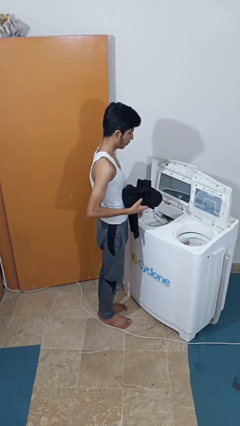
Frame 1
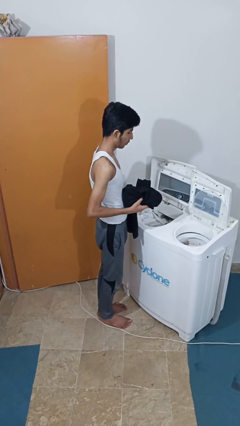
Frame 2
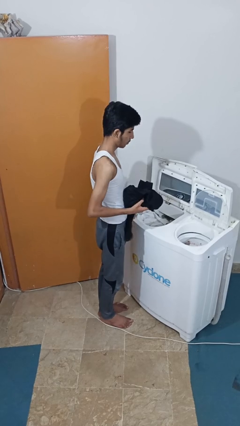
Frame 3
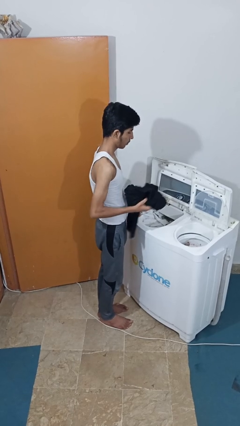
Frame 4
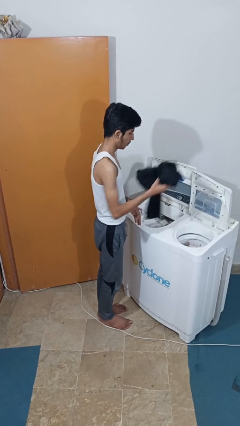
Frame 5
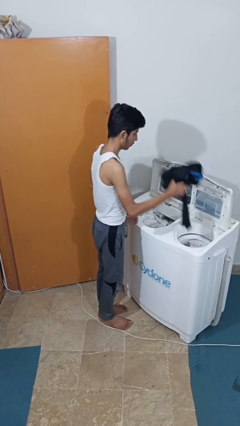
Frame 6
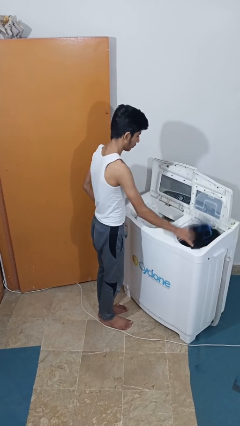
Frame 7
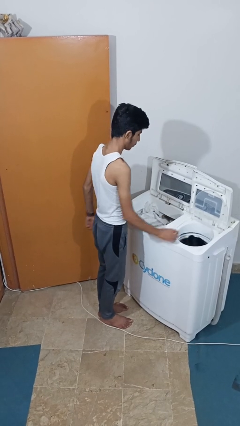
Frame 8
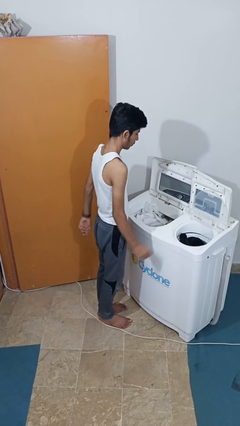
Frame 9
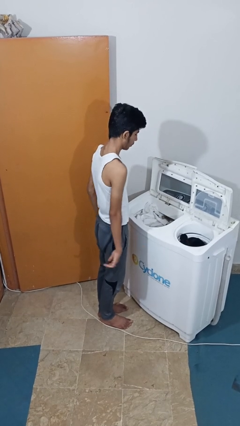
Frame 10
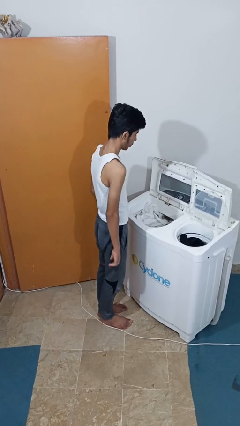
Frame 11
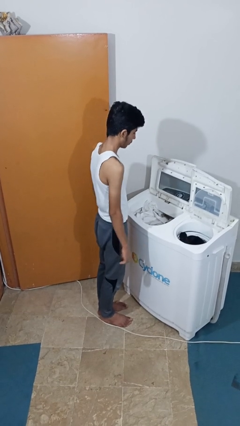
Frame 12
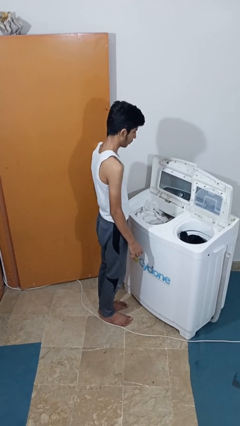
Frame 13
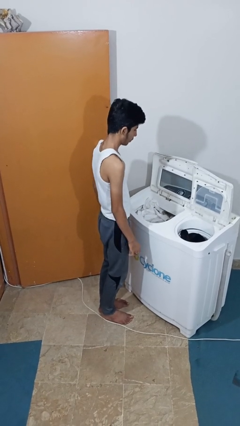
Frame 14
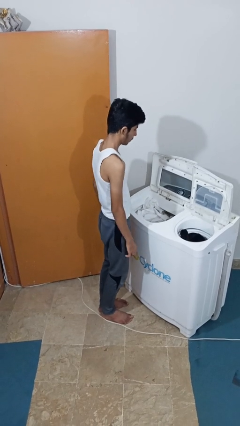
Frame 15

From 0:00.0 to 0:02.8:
person loads dryer

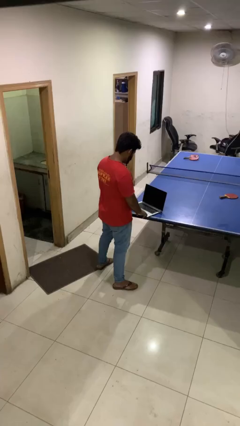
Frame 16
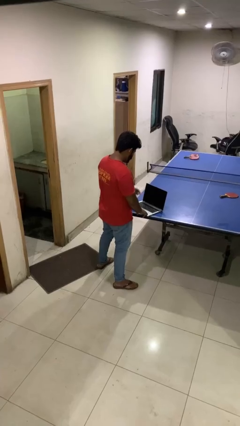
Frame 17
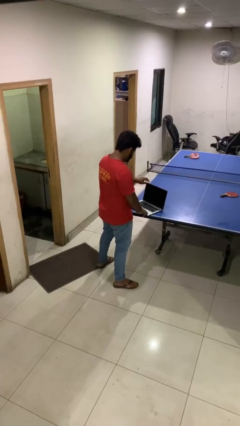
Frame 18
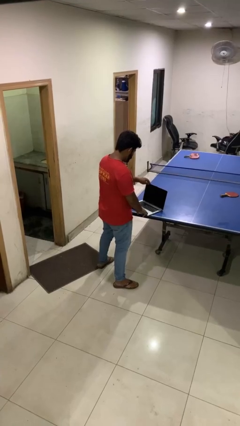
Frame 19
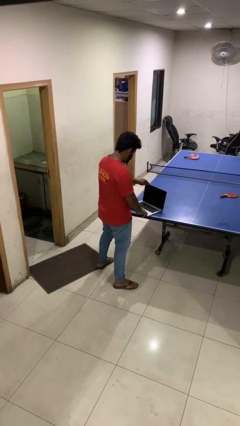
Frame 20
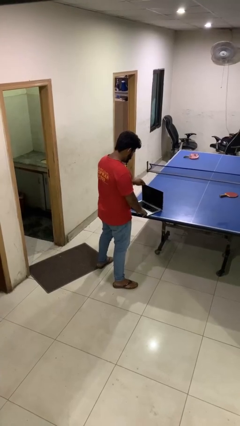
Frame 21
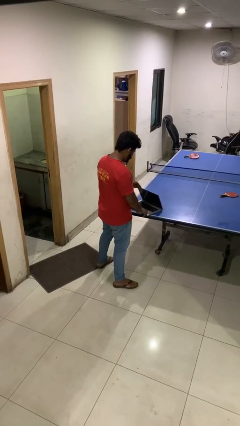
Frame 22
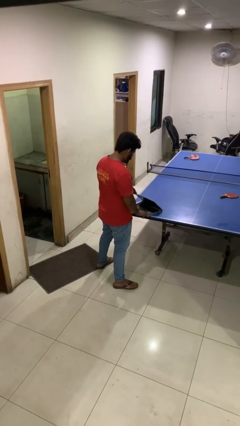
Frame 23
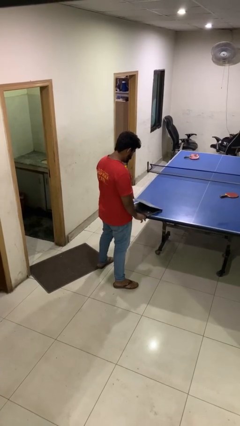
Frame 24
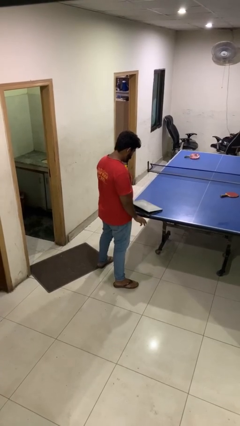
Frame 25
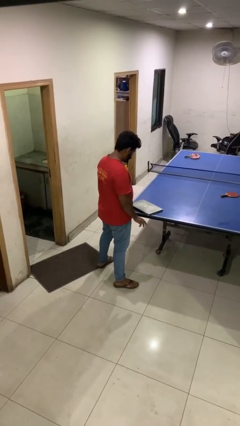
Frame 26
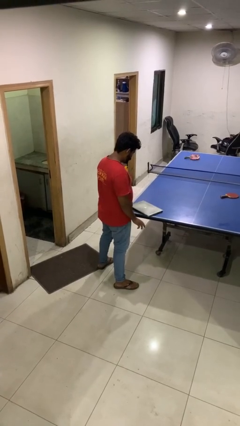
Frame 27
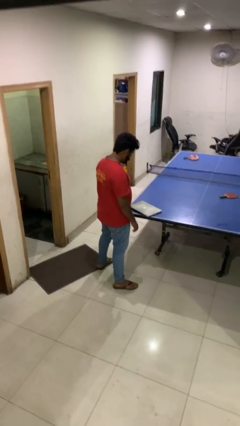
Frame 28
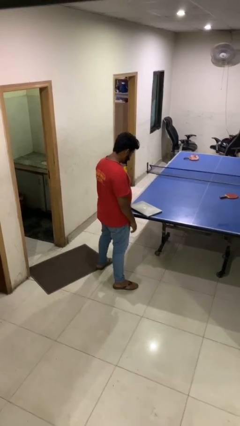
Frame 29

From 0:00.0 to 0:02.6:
person closes laptop

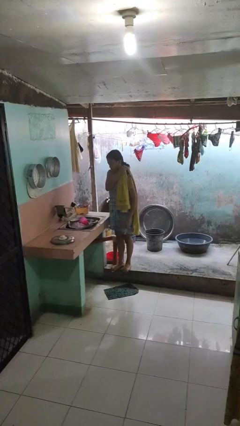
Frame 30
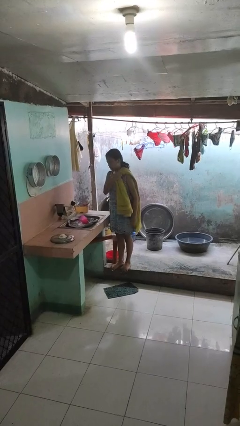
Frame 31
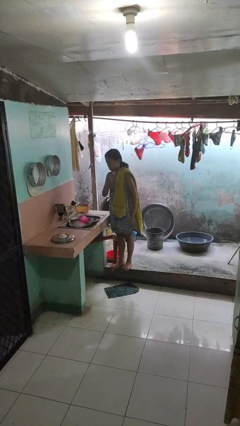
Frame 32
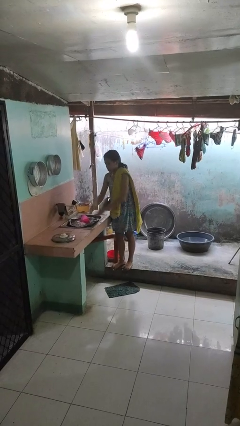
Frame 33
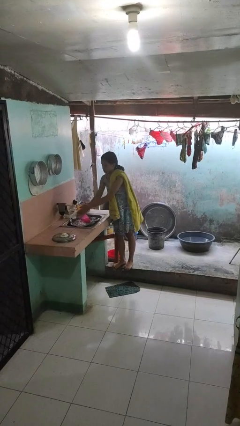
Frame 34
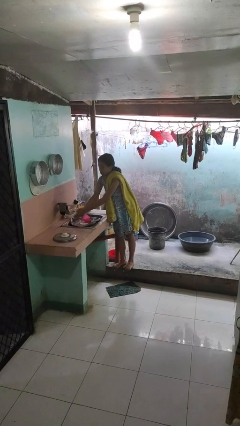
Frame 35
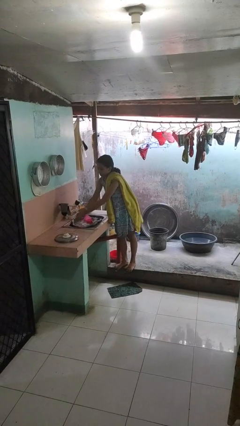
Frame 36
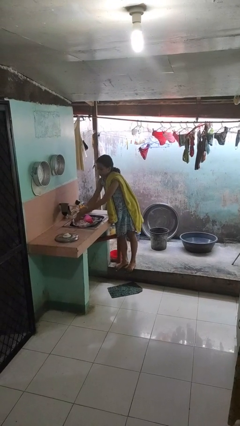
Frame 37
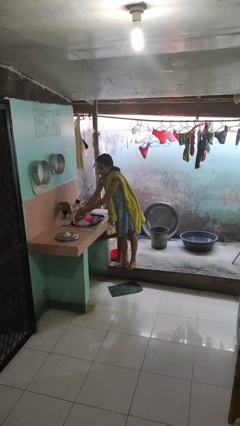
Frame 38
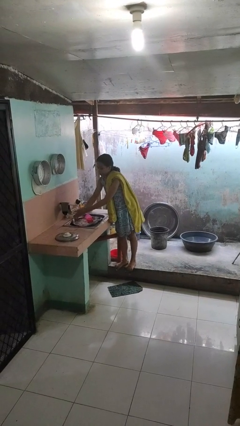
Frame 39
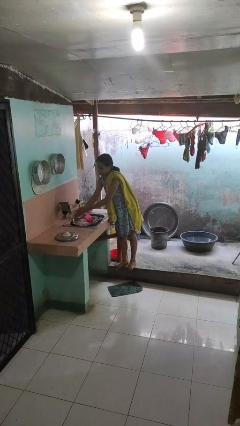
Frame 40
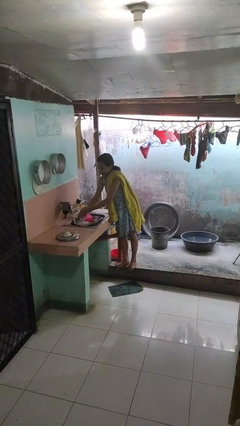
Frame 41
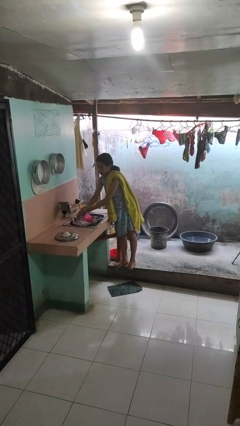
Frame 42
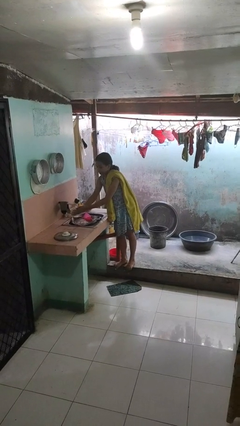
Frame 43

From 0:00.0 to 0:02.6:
person washes hands

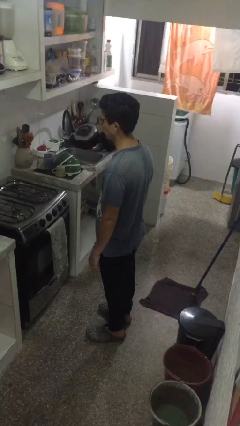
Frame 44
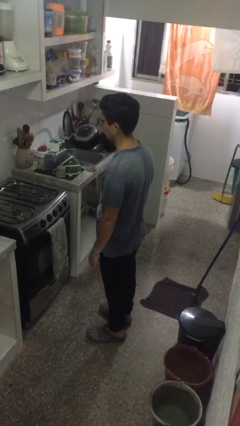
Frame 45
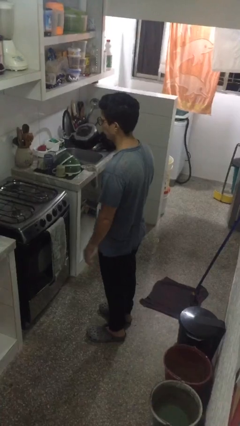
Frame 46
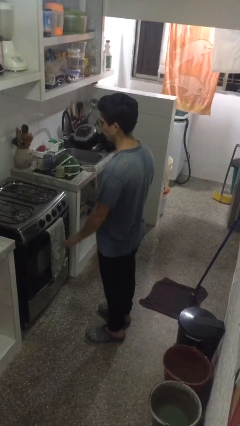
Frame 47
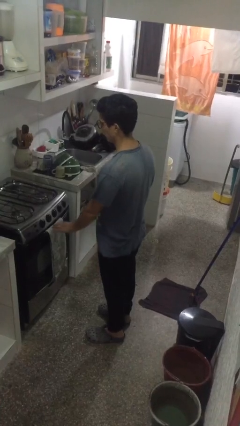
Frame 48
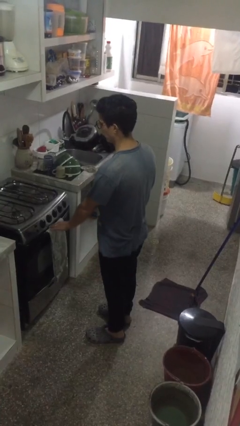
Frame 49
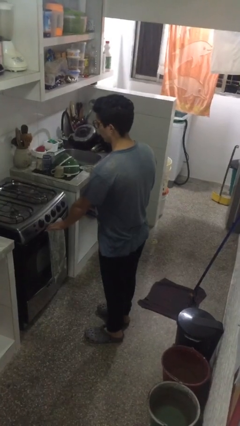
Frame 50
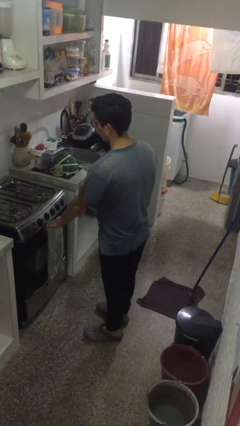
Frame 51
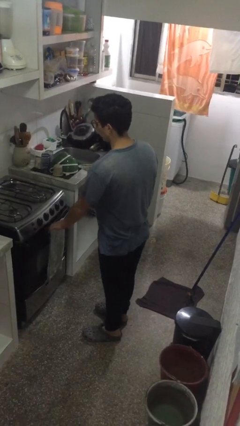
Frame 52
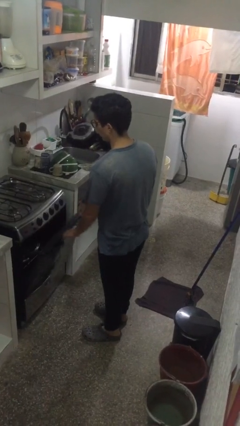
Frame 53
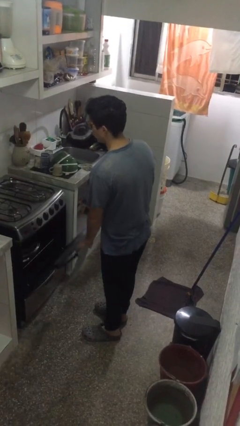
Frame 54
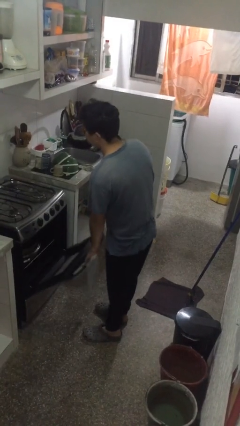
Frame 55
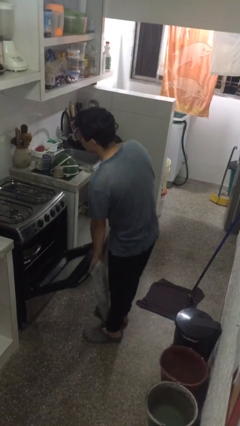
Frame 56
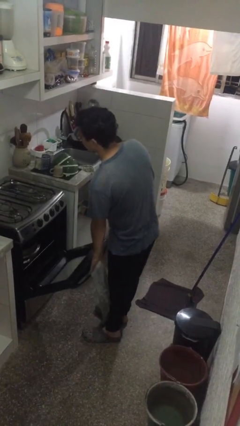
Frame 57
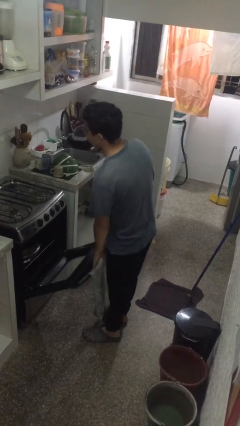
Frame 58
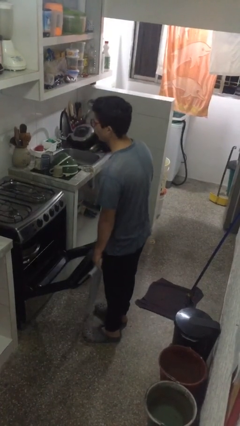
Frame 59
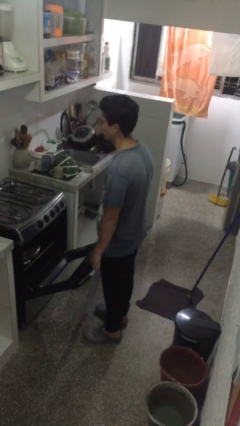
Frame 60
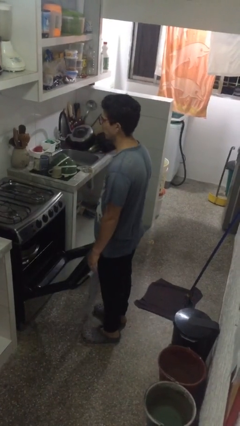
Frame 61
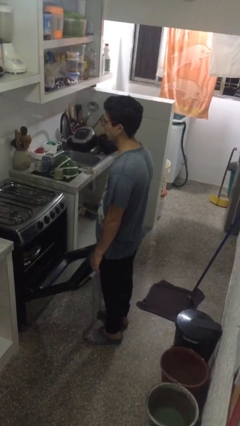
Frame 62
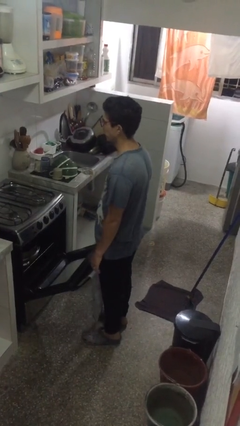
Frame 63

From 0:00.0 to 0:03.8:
person opens oven door

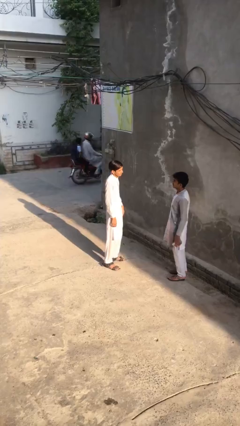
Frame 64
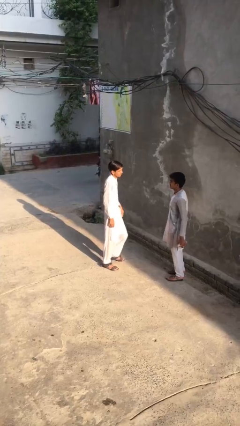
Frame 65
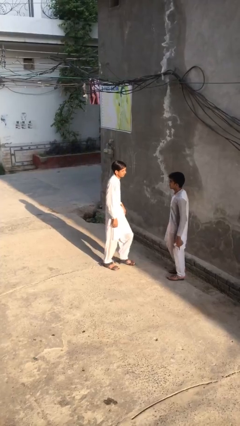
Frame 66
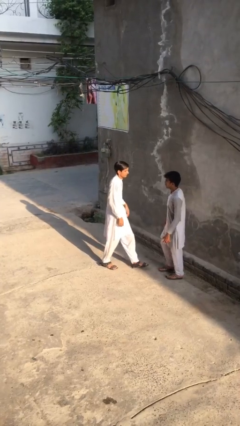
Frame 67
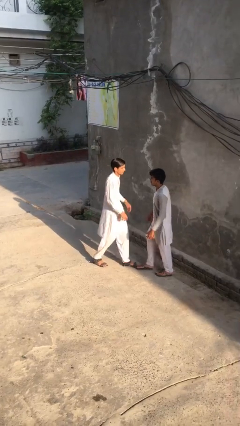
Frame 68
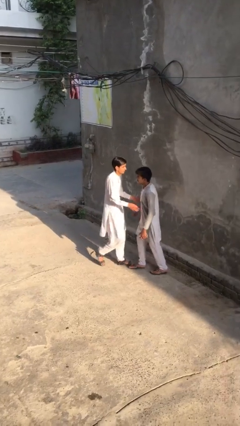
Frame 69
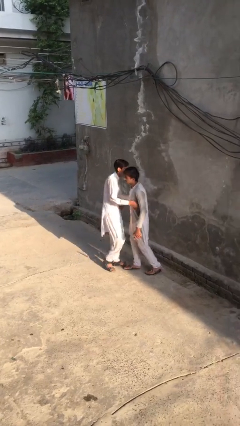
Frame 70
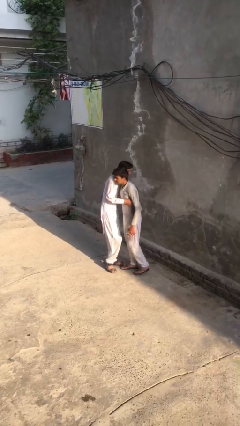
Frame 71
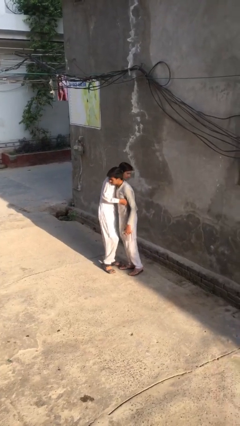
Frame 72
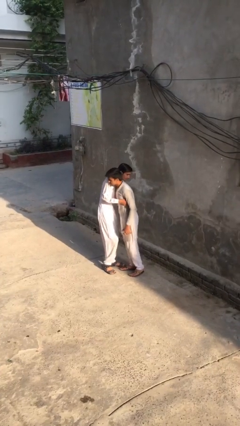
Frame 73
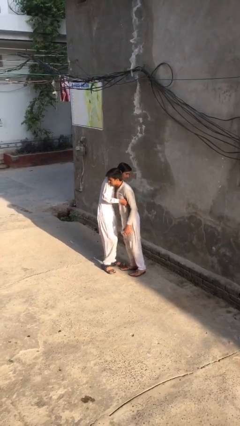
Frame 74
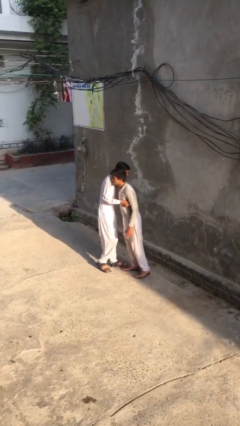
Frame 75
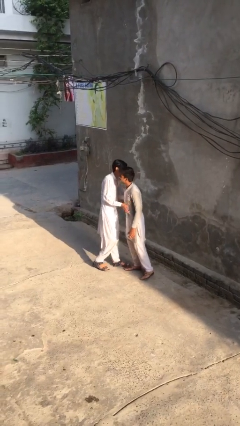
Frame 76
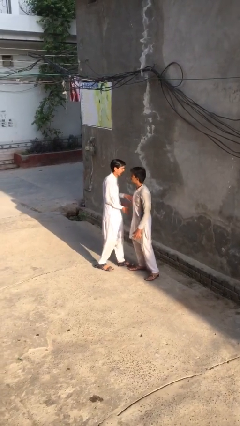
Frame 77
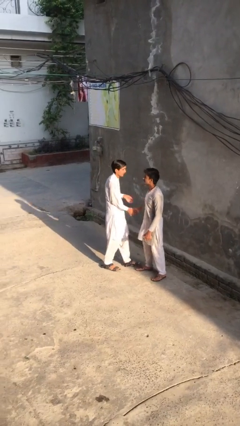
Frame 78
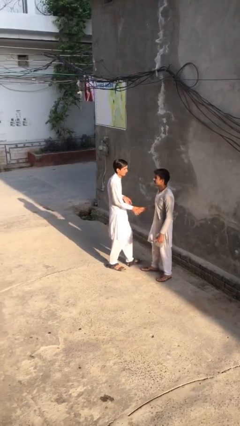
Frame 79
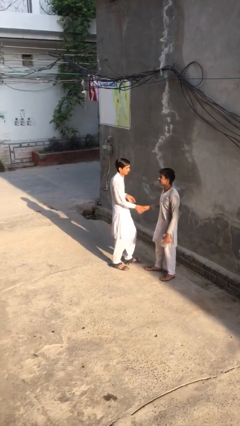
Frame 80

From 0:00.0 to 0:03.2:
person embraces person

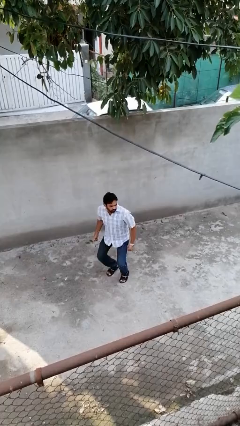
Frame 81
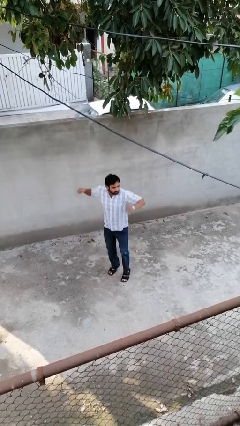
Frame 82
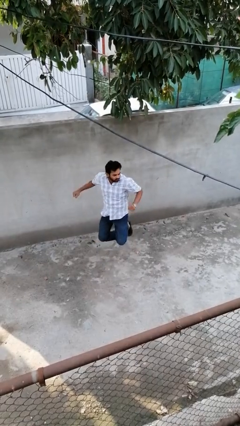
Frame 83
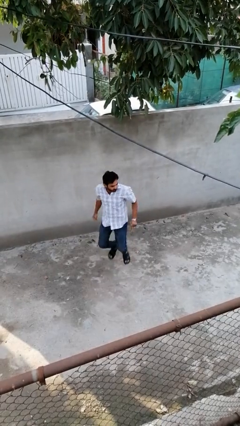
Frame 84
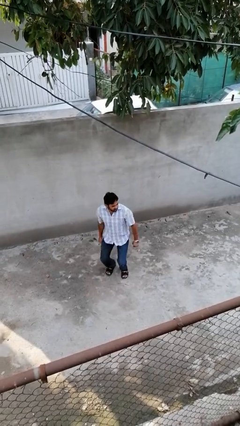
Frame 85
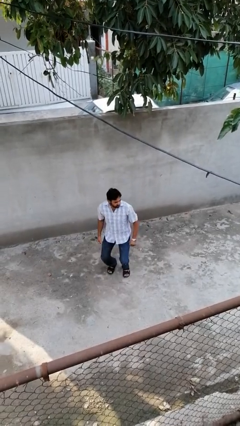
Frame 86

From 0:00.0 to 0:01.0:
person jumps

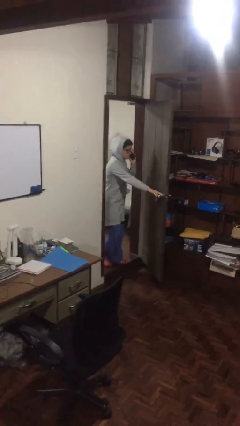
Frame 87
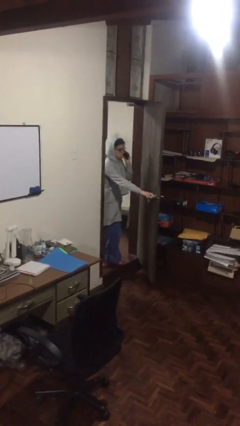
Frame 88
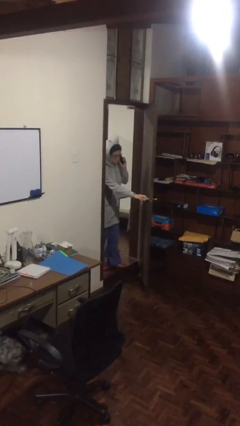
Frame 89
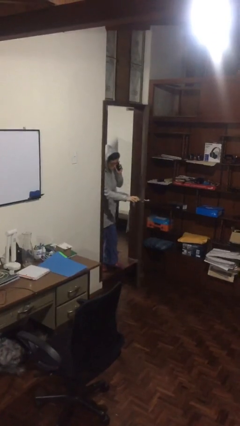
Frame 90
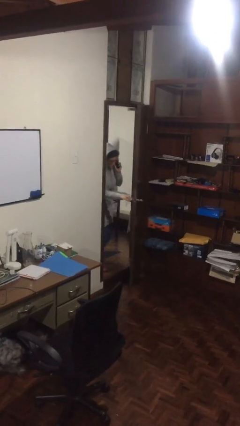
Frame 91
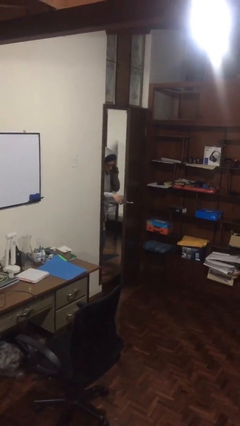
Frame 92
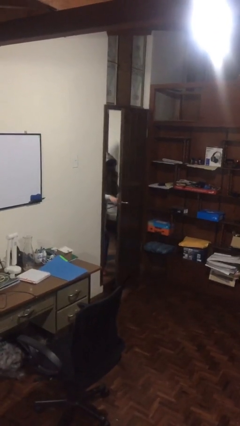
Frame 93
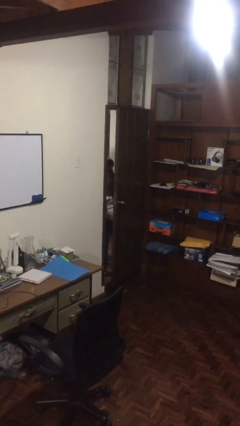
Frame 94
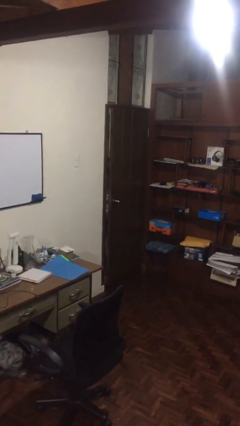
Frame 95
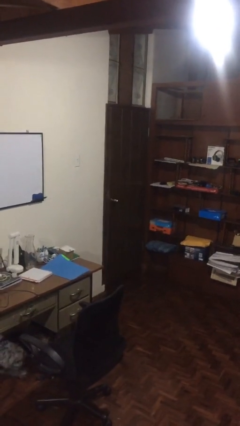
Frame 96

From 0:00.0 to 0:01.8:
person closes facility door
